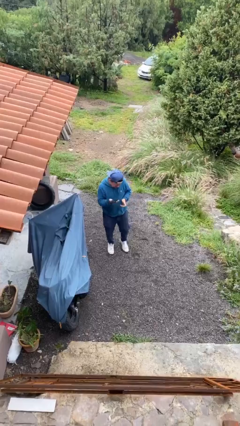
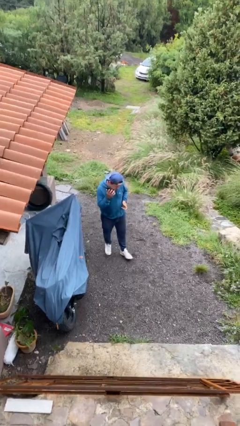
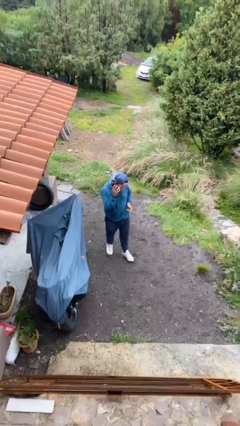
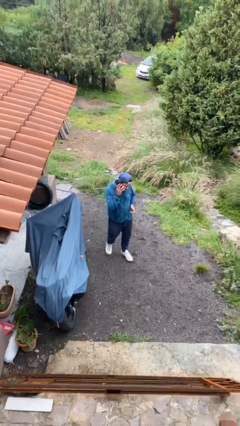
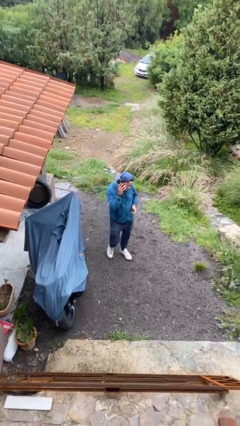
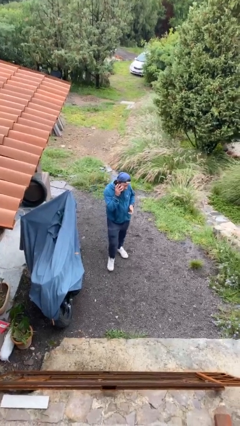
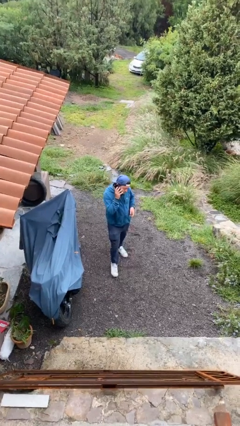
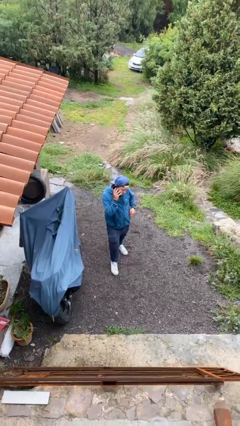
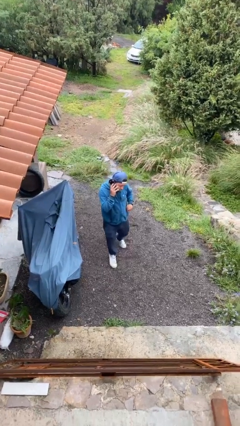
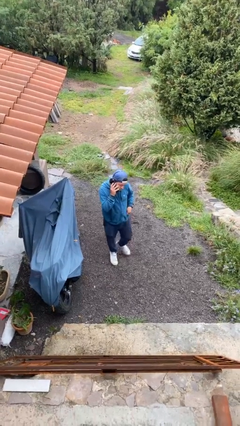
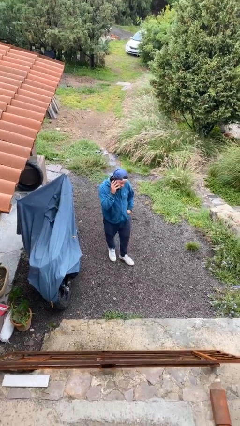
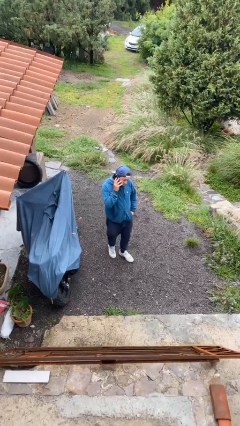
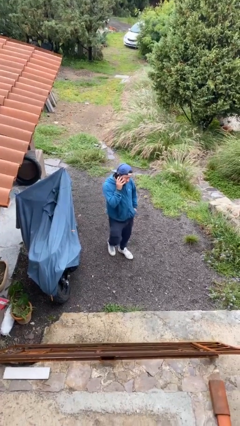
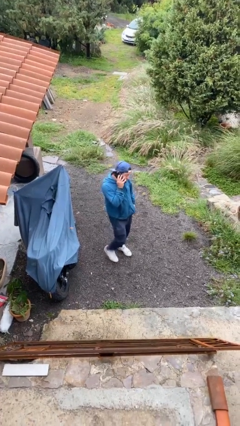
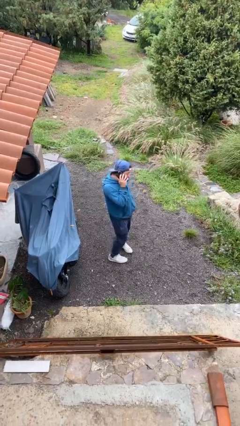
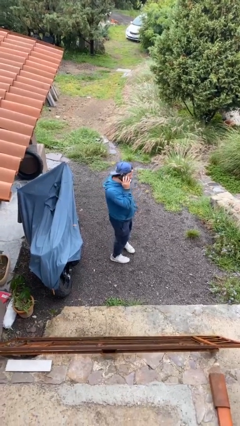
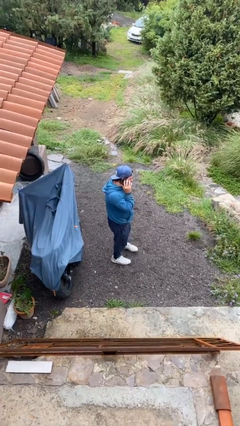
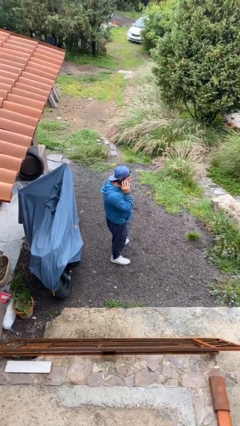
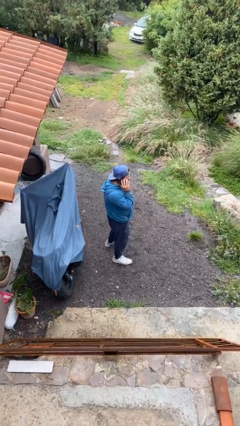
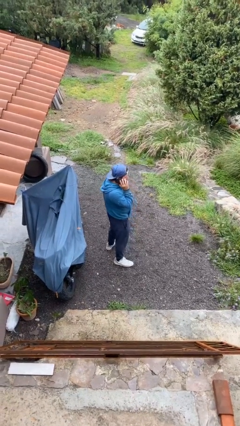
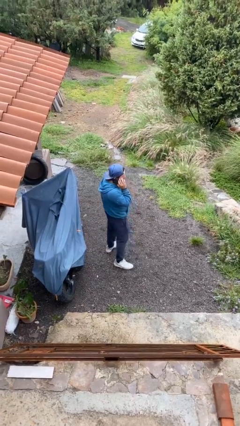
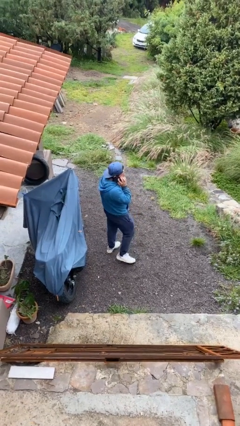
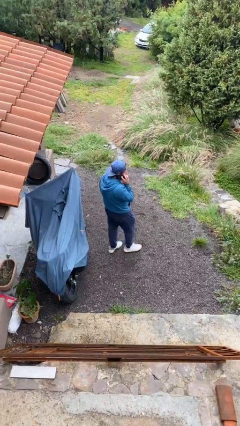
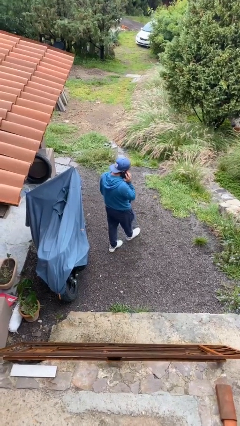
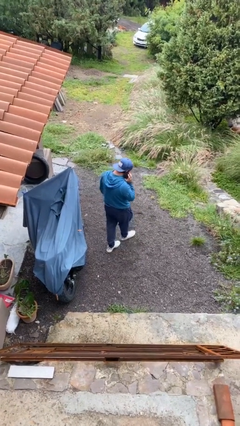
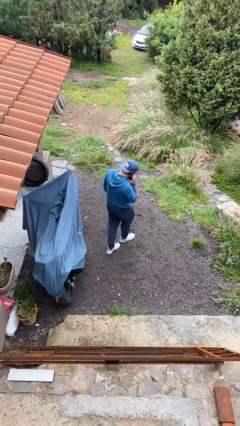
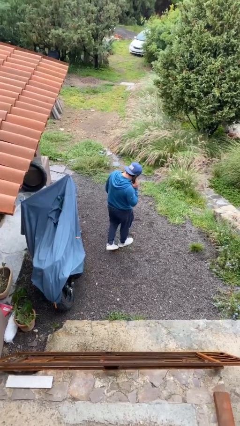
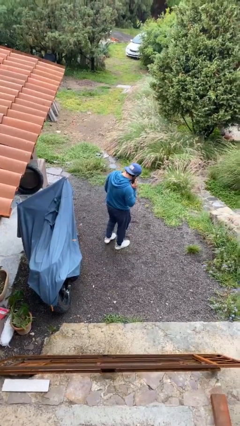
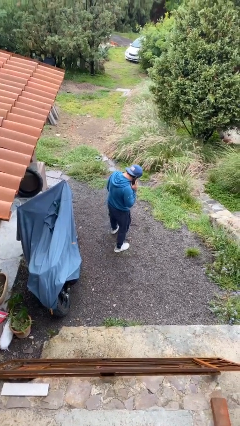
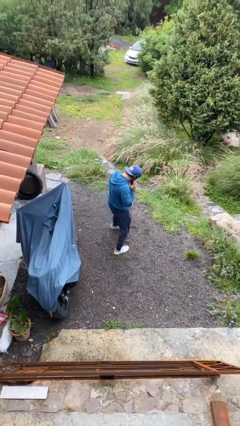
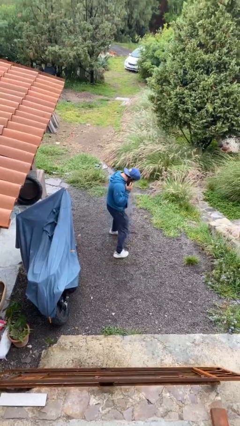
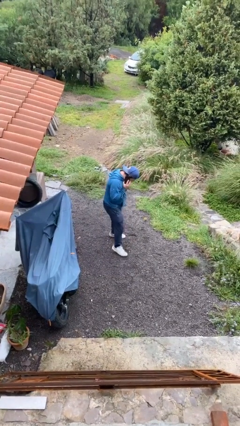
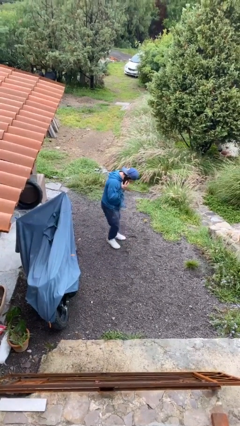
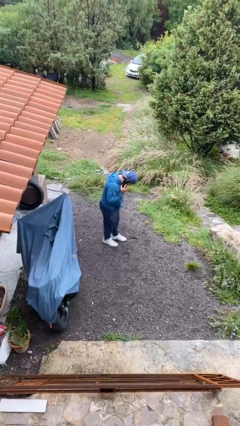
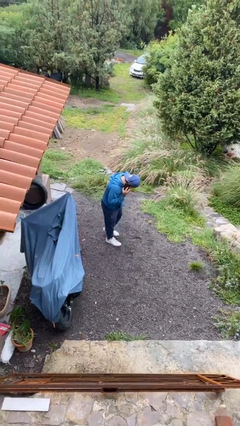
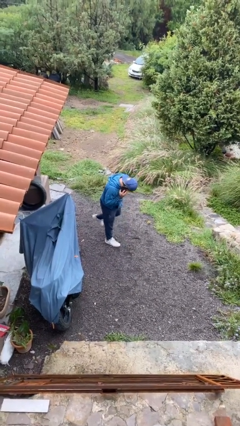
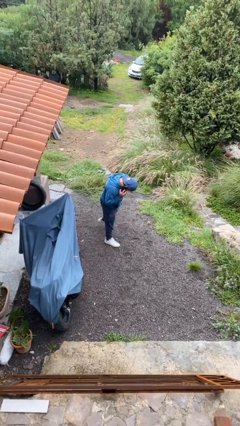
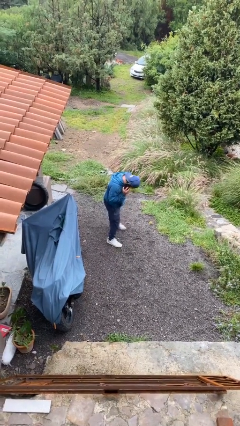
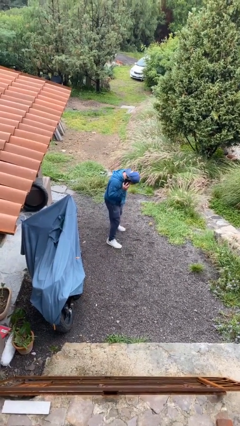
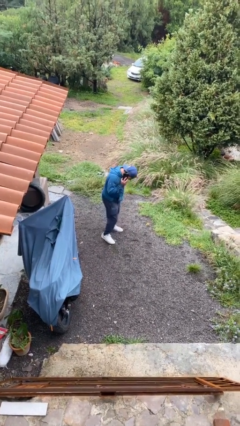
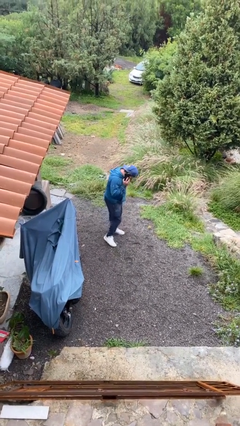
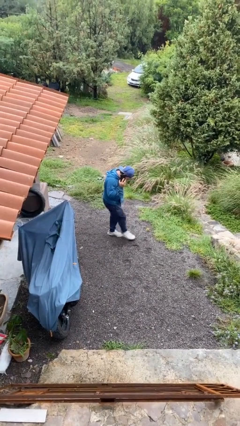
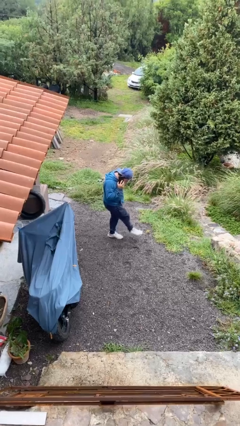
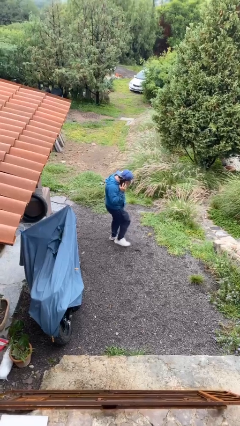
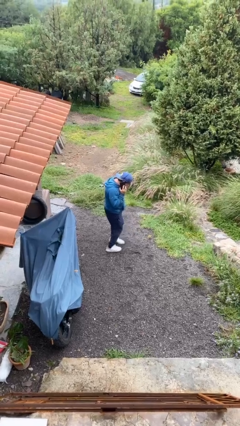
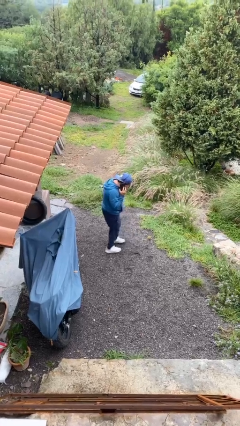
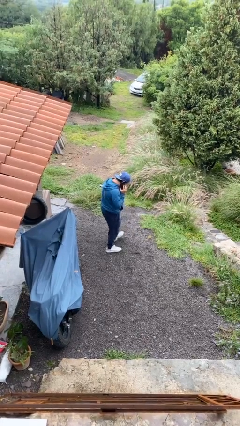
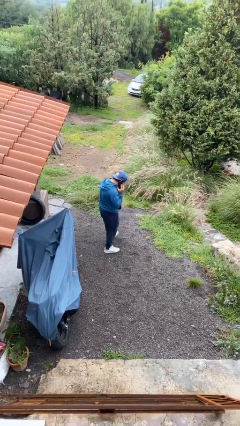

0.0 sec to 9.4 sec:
person talks on phone

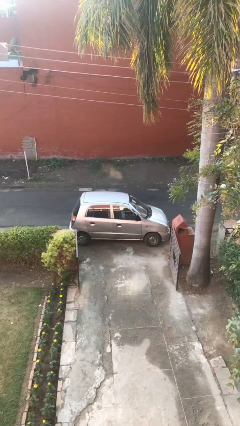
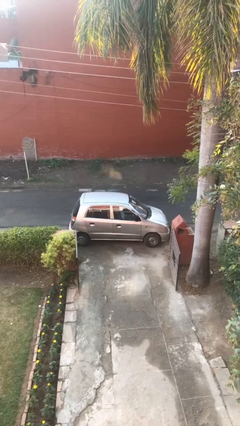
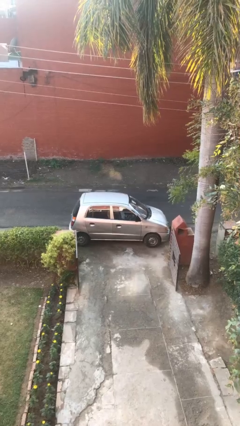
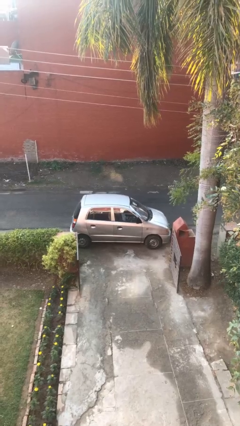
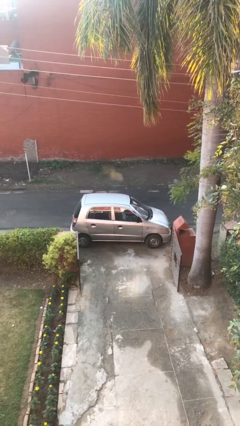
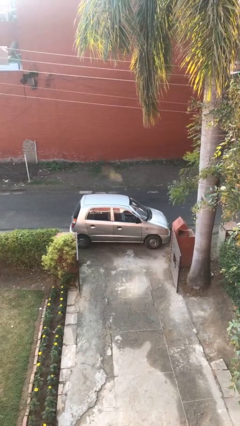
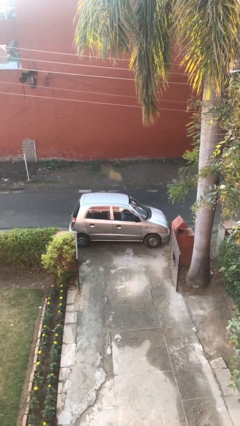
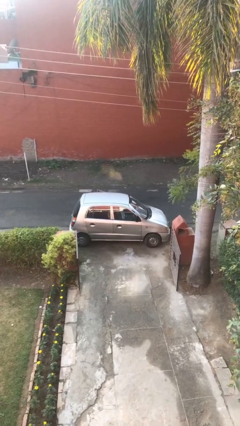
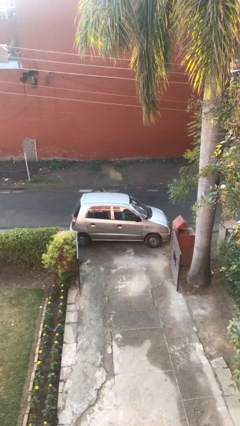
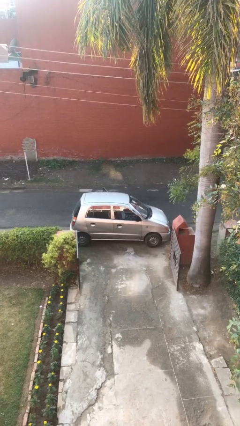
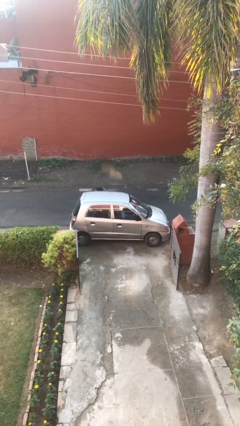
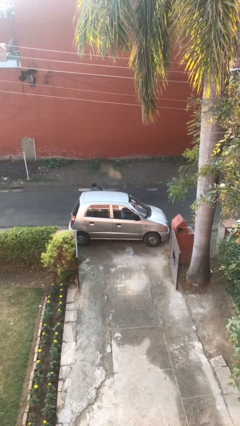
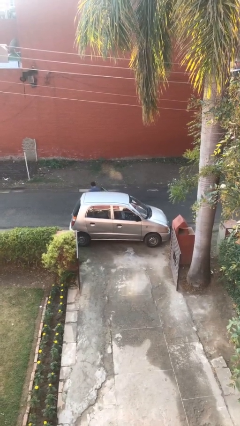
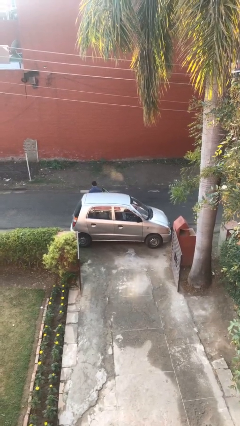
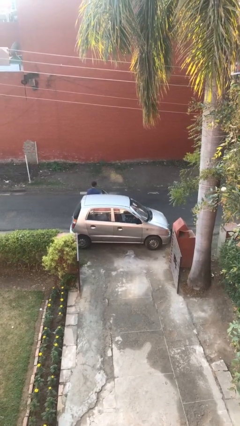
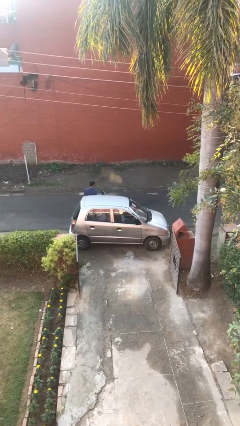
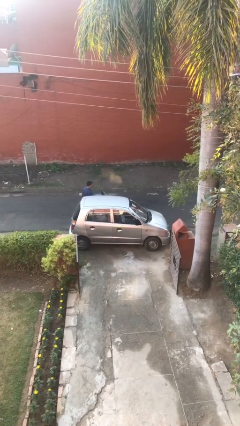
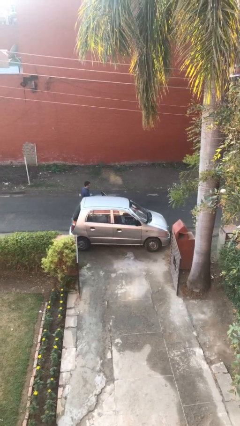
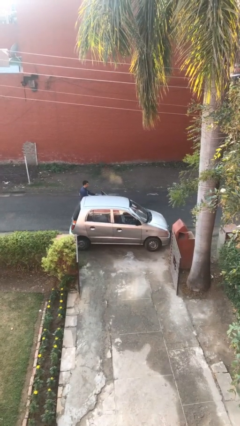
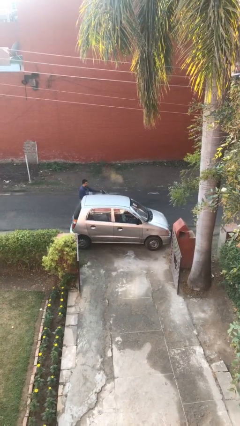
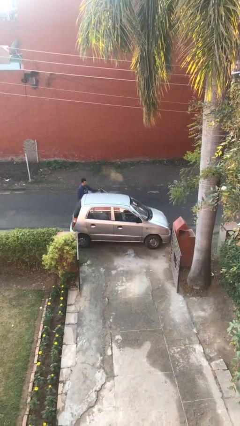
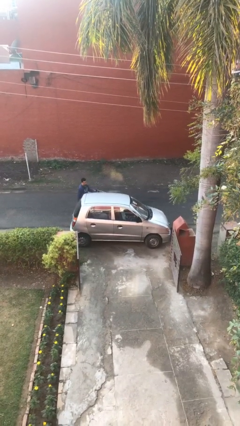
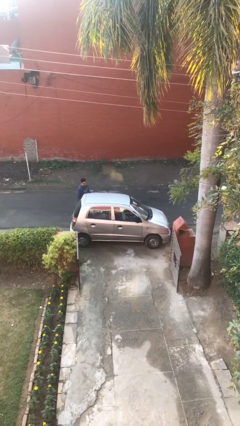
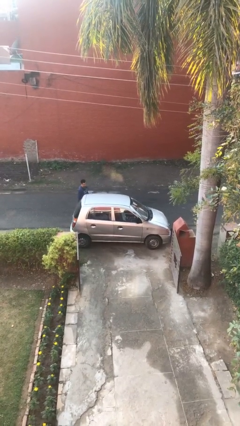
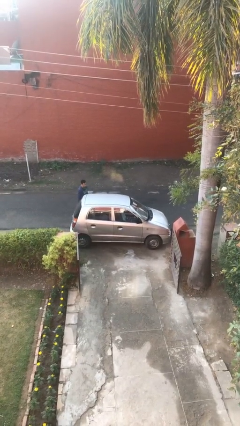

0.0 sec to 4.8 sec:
car drops off person

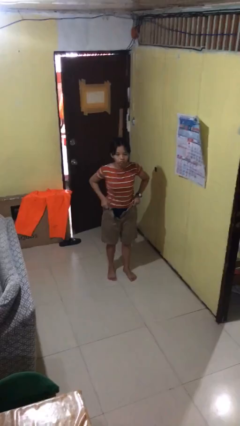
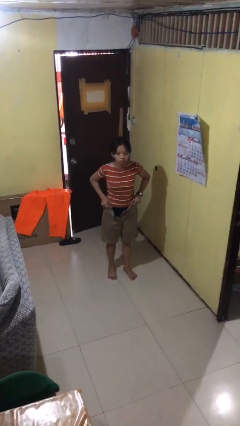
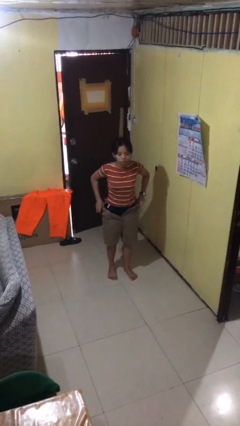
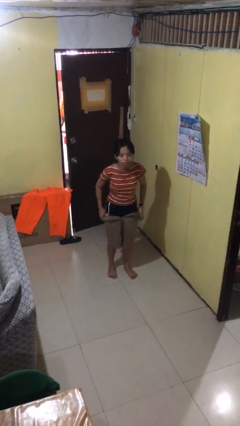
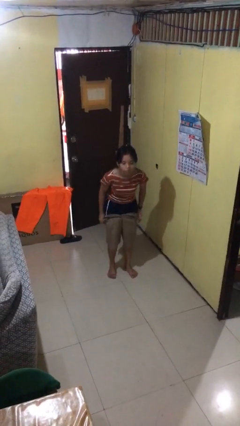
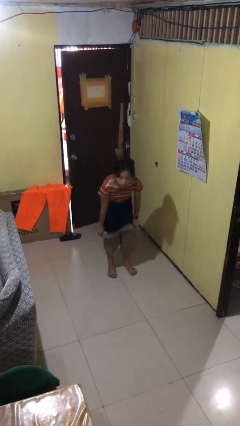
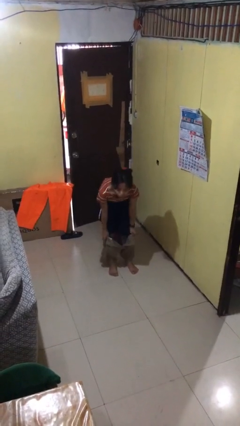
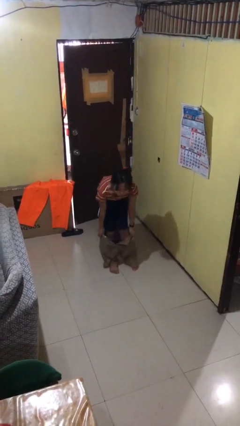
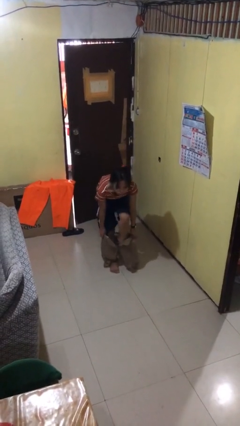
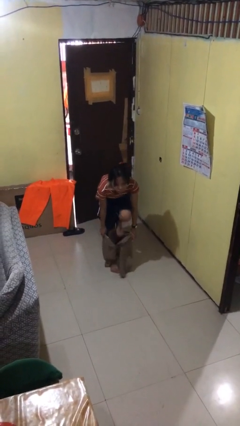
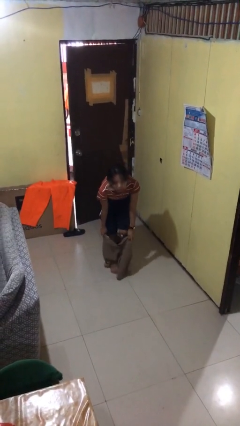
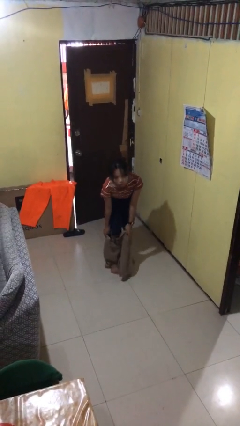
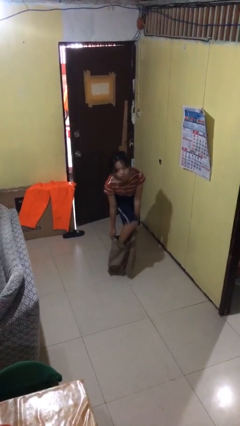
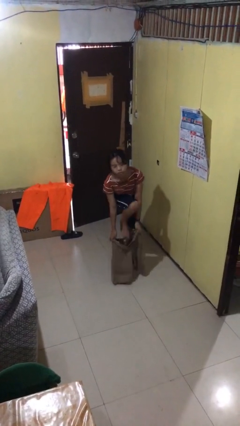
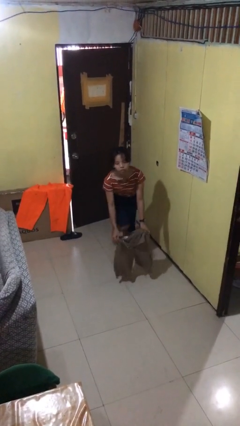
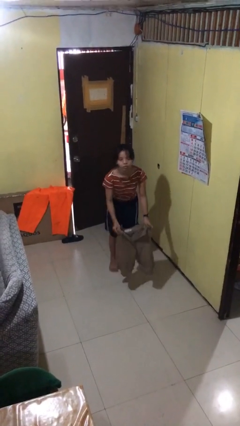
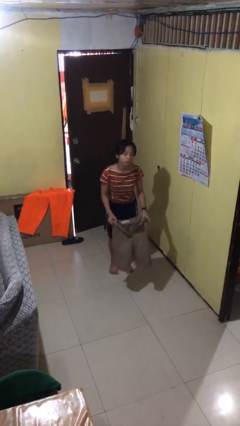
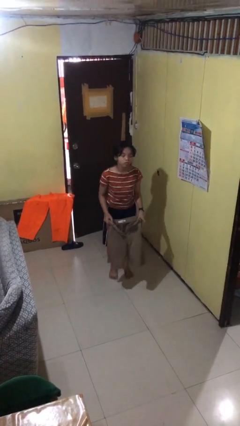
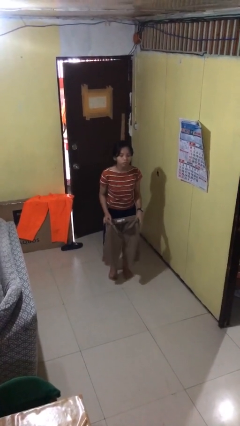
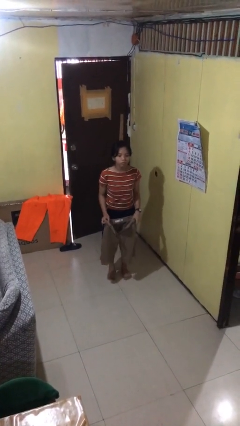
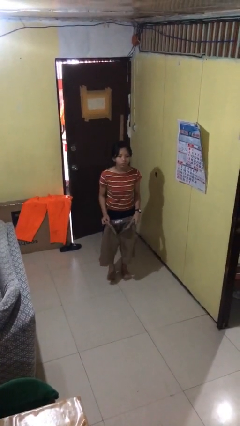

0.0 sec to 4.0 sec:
person takes off pants

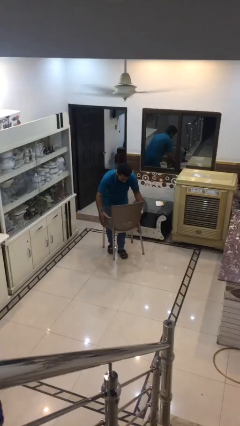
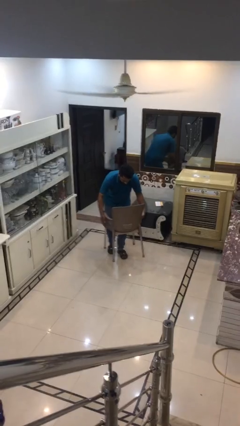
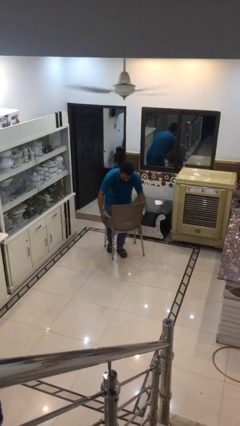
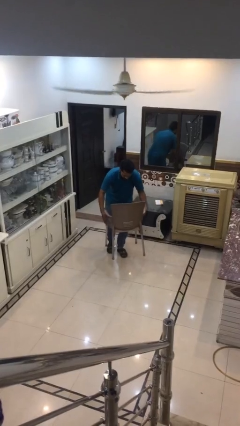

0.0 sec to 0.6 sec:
person carries heavy object
